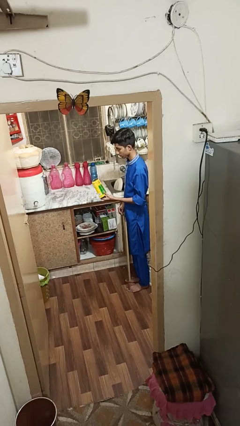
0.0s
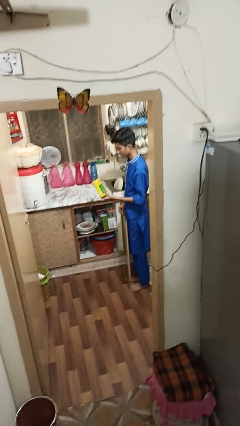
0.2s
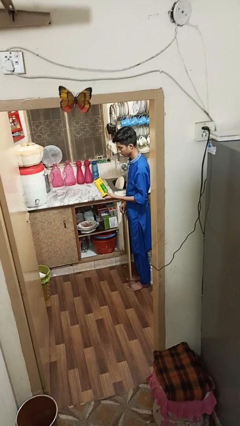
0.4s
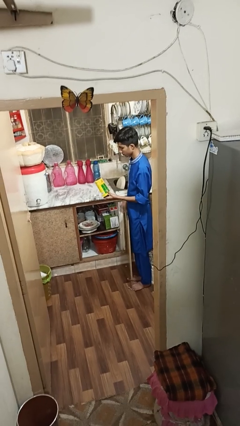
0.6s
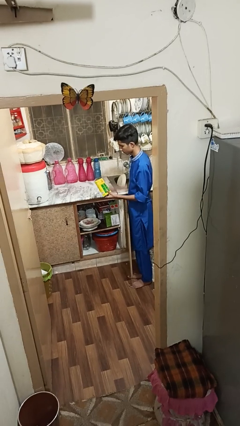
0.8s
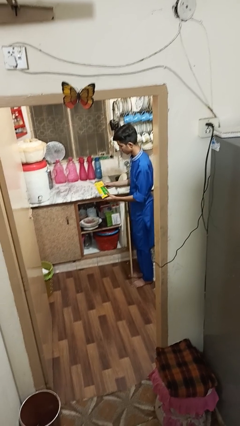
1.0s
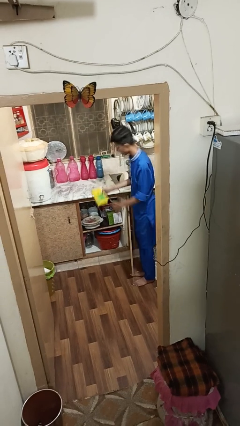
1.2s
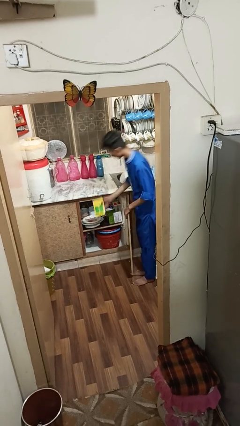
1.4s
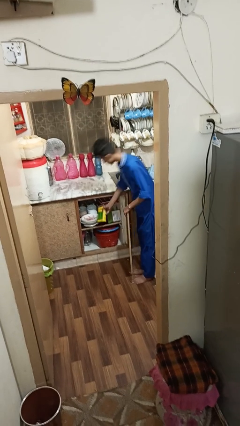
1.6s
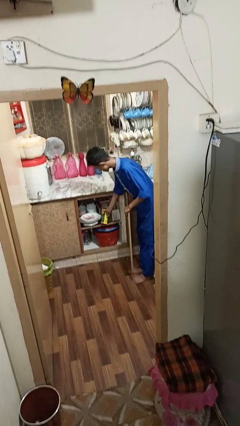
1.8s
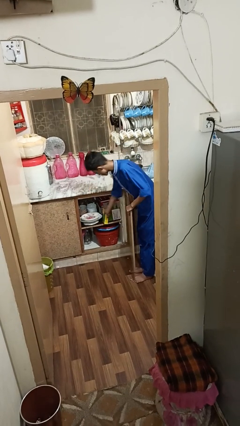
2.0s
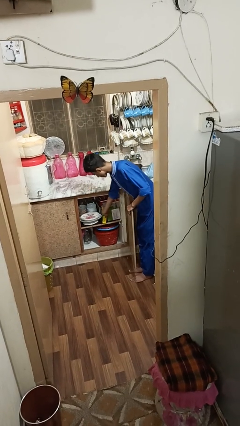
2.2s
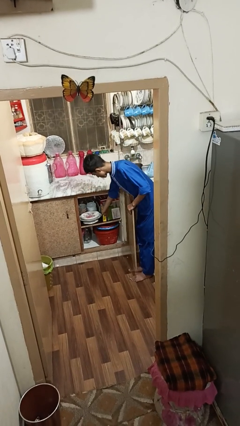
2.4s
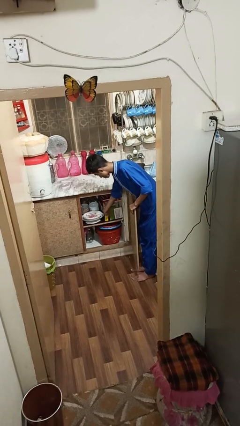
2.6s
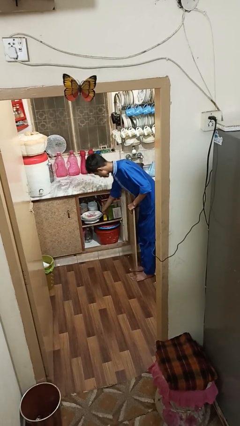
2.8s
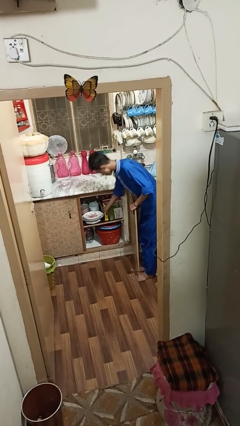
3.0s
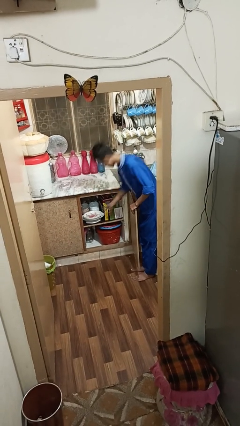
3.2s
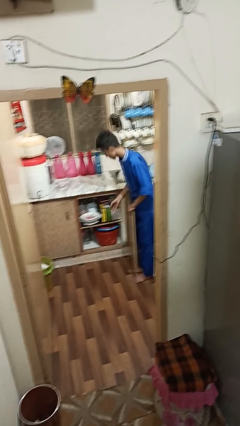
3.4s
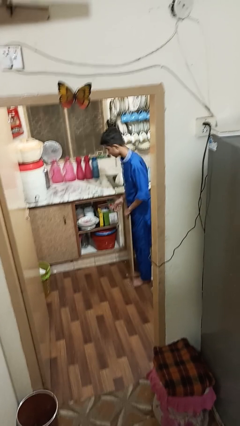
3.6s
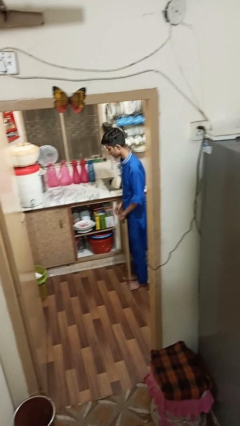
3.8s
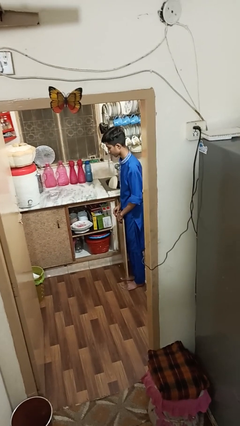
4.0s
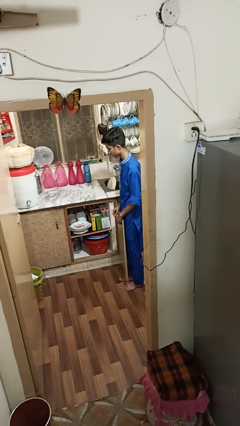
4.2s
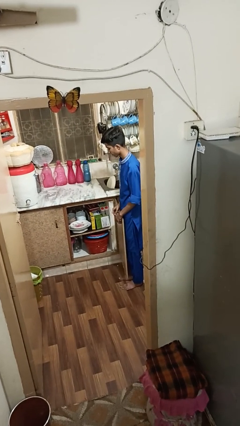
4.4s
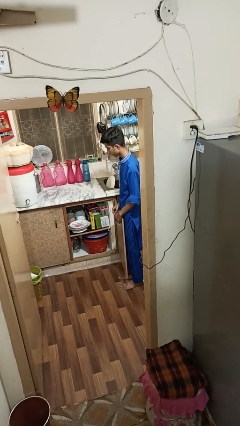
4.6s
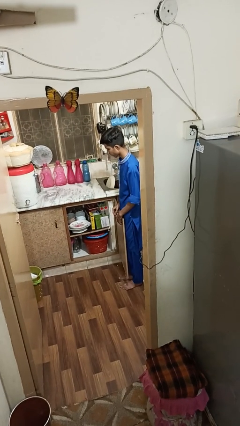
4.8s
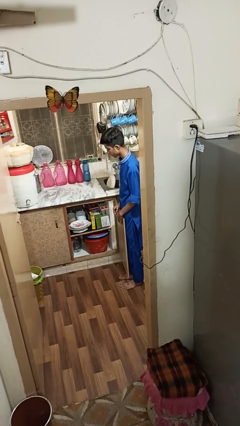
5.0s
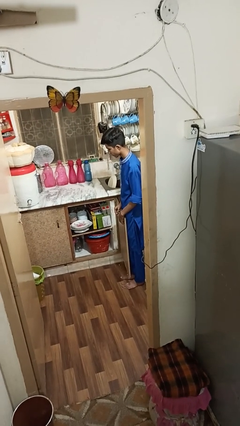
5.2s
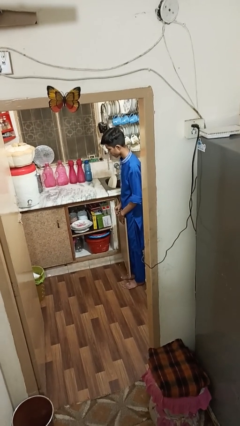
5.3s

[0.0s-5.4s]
person puts object in cabinet

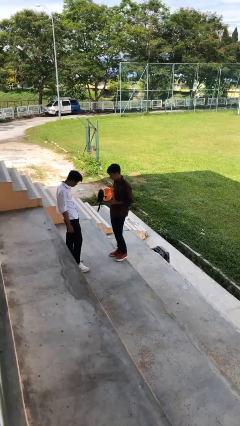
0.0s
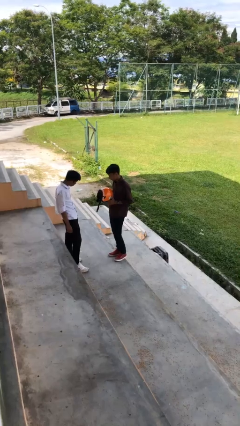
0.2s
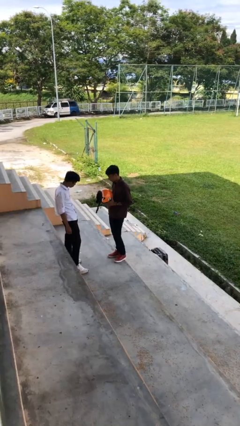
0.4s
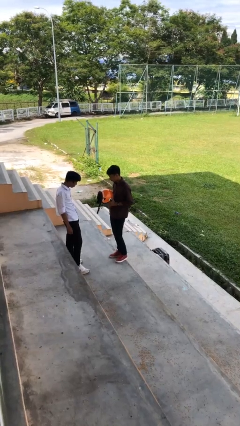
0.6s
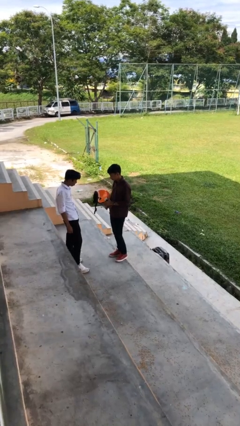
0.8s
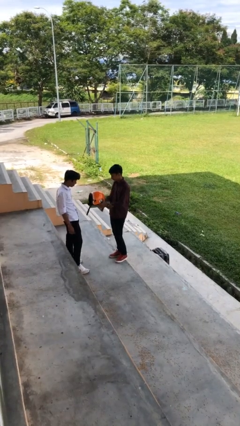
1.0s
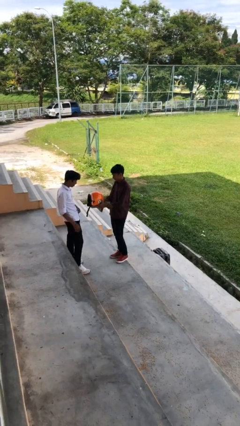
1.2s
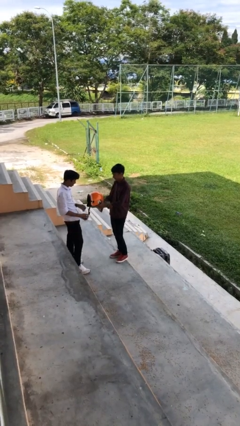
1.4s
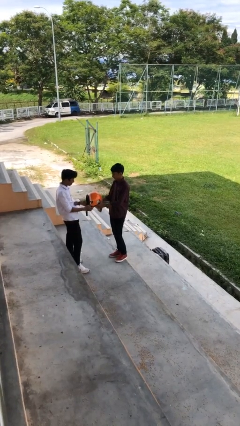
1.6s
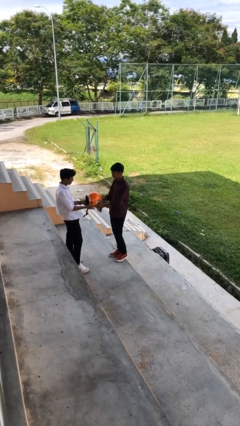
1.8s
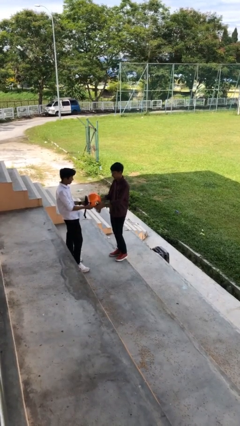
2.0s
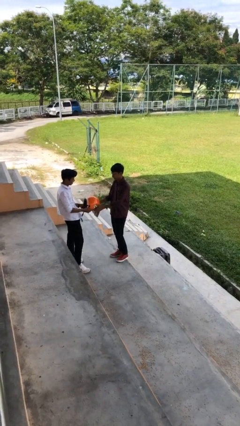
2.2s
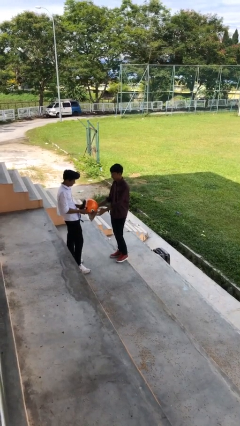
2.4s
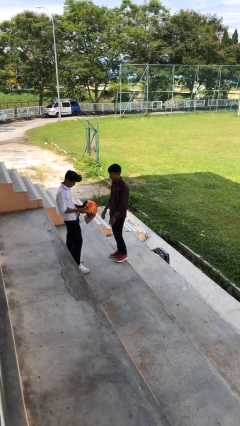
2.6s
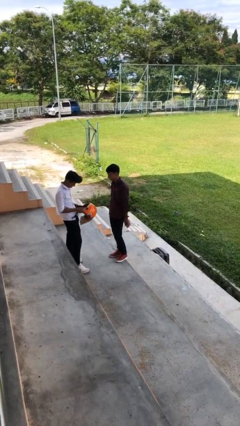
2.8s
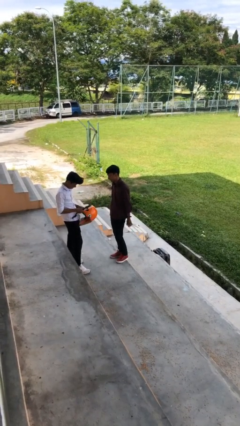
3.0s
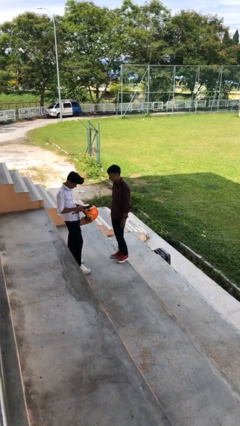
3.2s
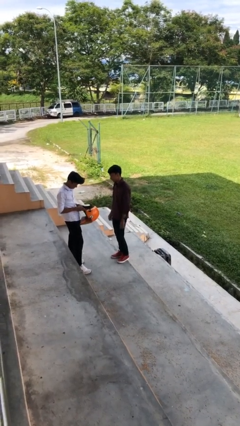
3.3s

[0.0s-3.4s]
person transfers object to person

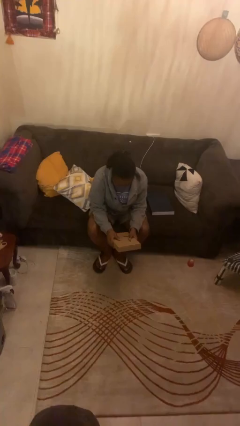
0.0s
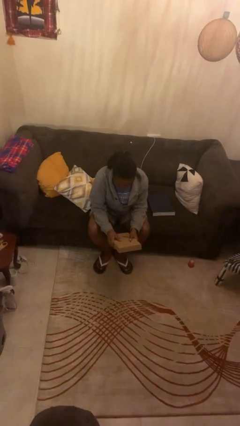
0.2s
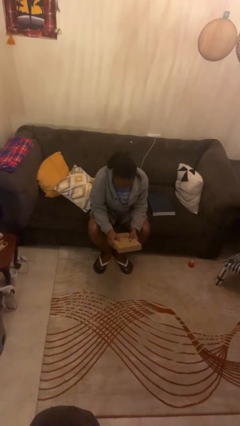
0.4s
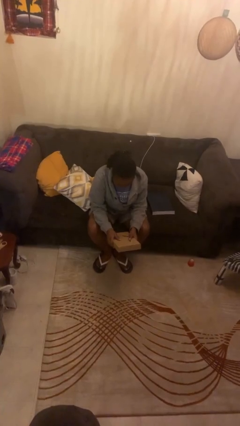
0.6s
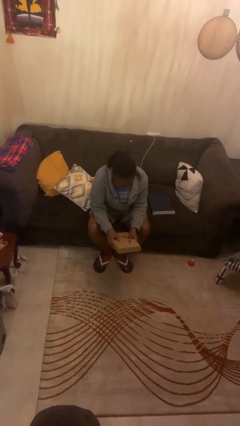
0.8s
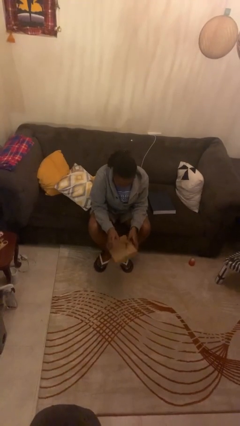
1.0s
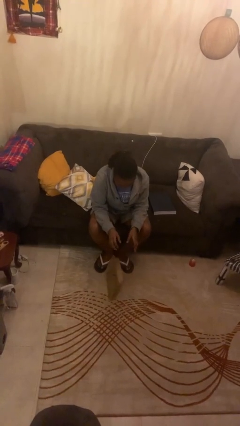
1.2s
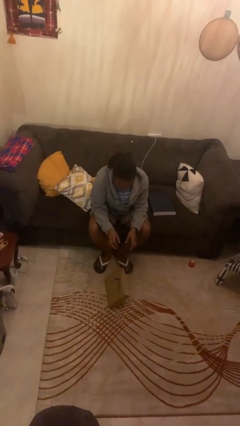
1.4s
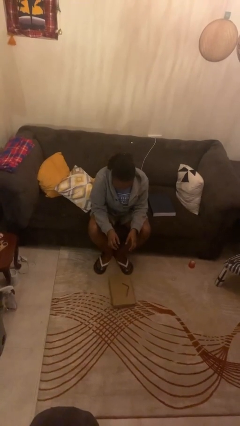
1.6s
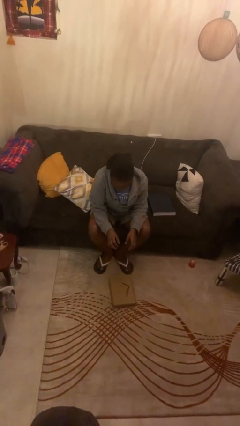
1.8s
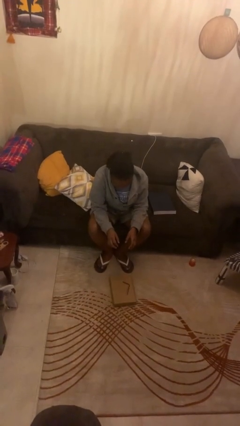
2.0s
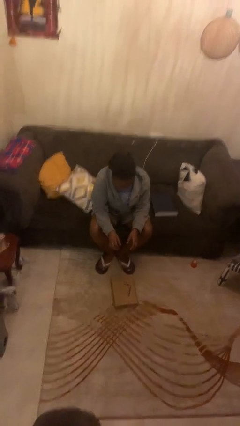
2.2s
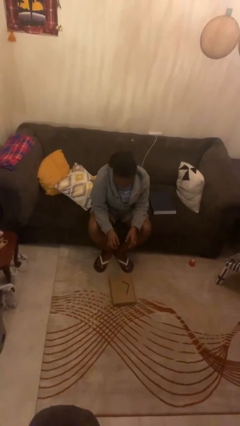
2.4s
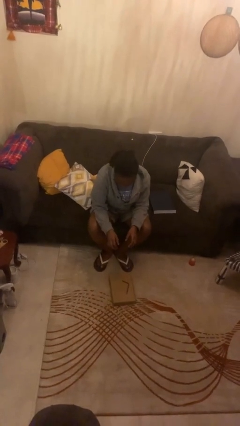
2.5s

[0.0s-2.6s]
person drops object

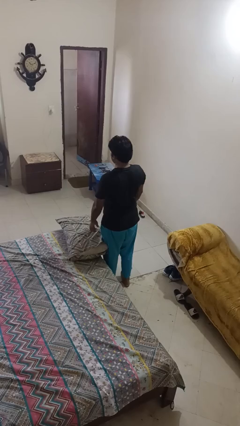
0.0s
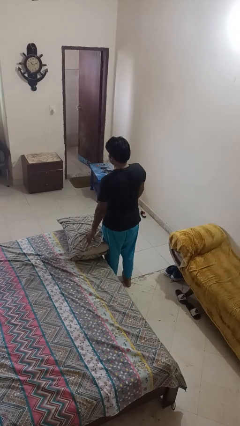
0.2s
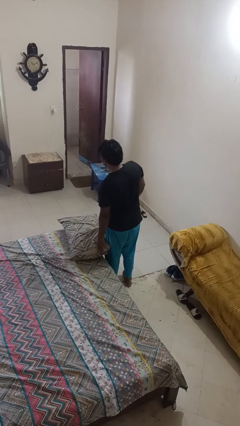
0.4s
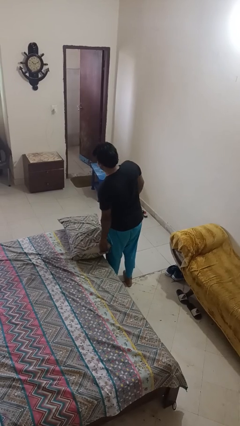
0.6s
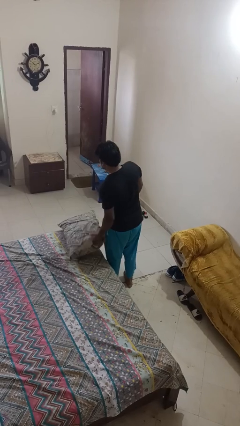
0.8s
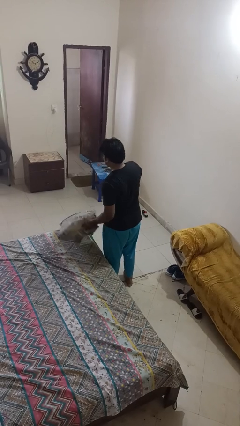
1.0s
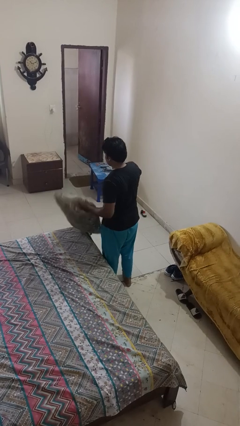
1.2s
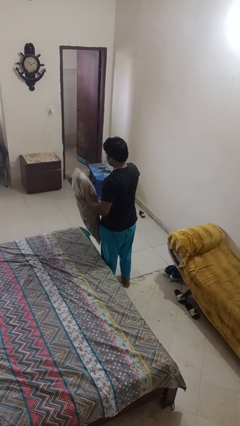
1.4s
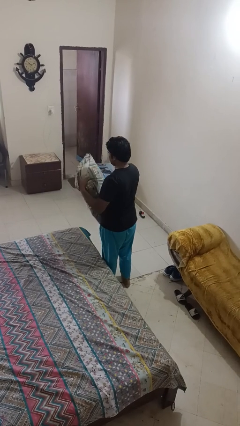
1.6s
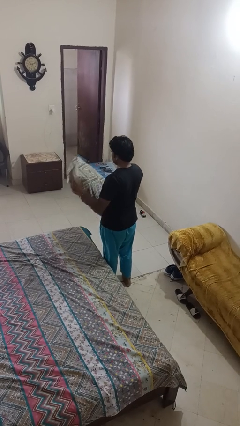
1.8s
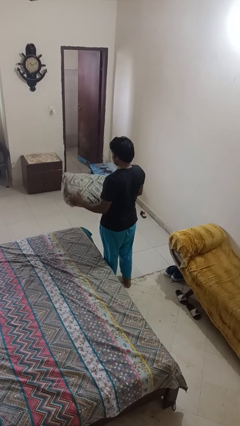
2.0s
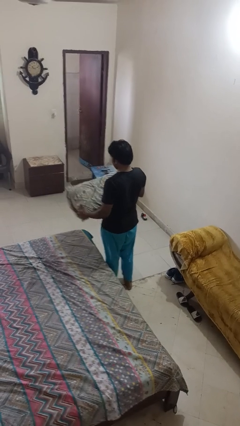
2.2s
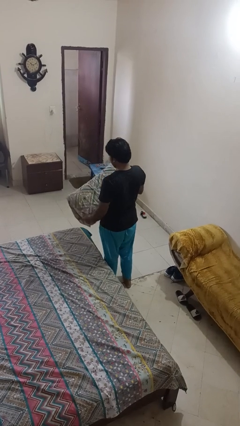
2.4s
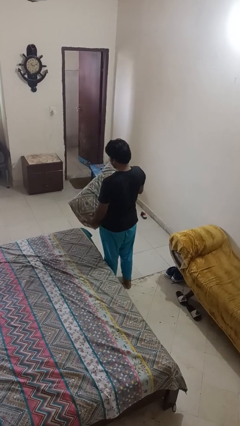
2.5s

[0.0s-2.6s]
person picks up object from bed

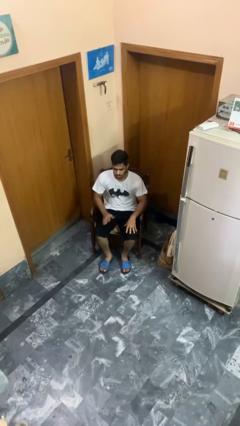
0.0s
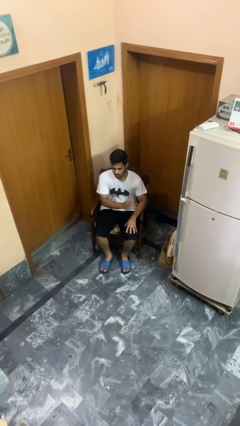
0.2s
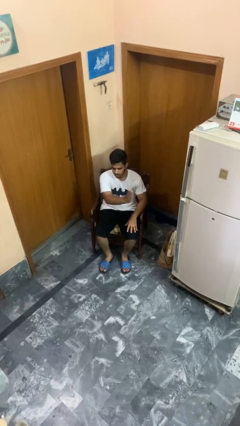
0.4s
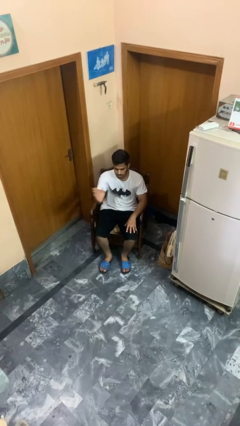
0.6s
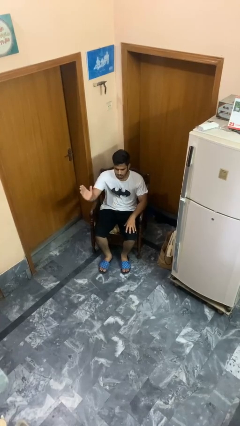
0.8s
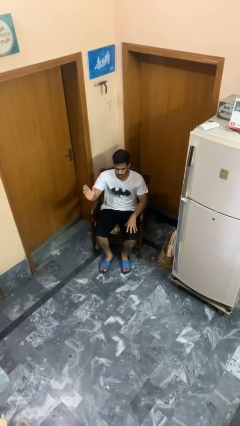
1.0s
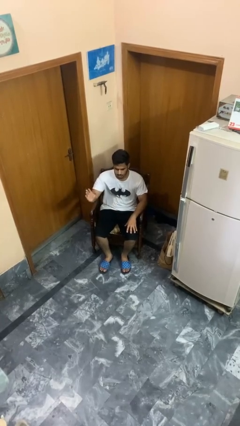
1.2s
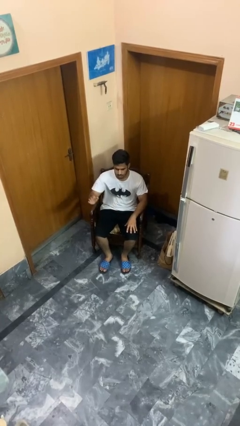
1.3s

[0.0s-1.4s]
person gestures swipe right

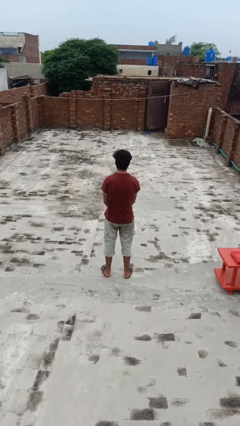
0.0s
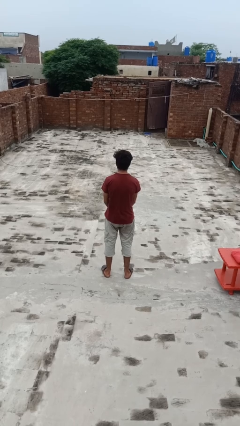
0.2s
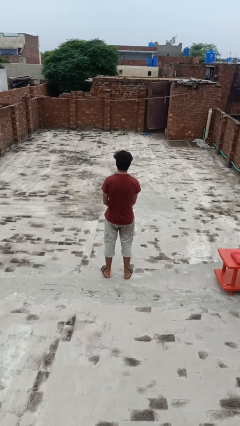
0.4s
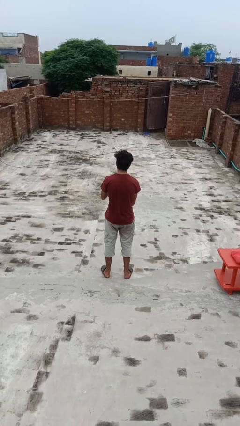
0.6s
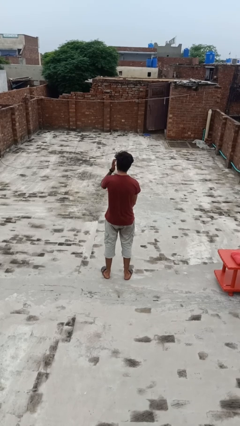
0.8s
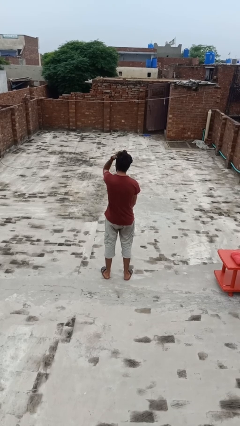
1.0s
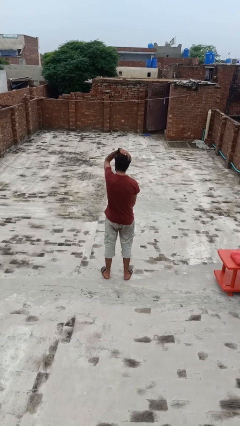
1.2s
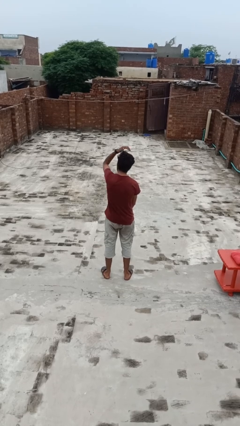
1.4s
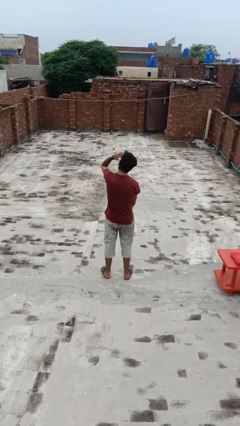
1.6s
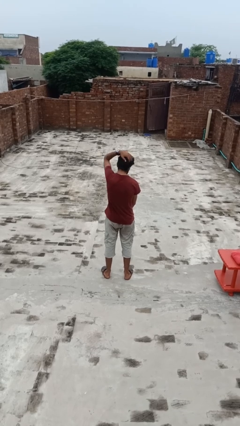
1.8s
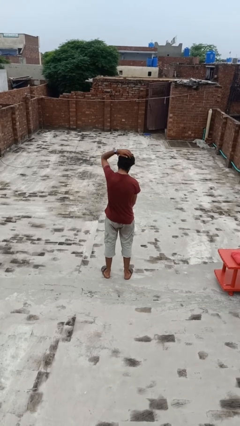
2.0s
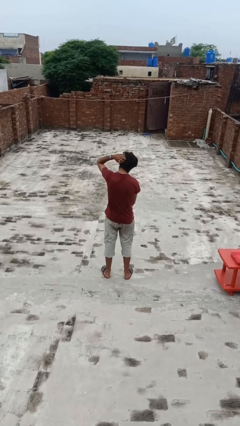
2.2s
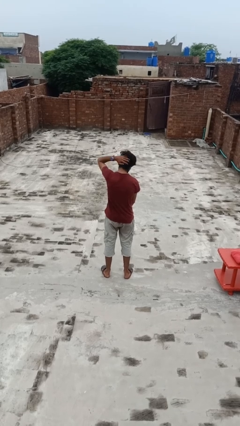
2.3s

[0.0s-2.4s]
person strokes hair
